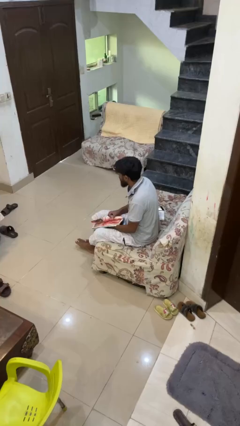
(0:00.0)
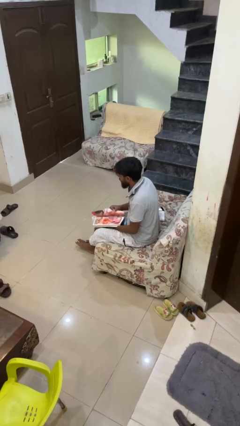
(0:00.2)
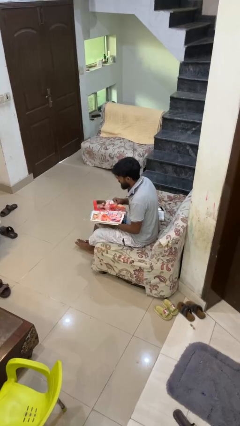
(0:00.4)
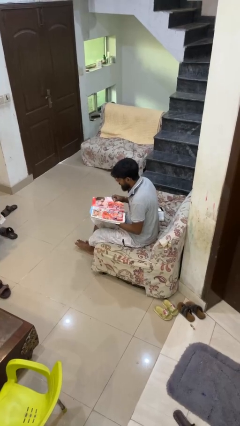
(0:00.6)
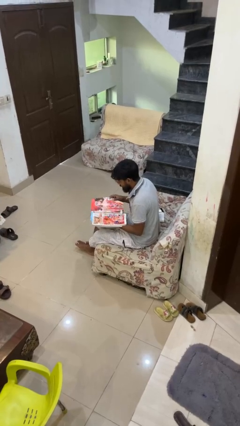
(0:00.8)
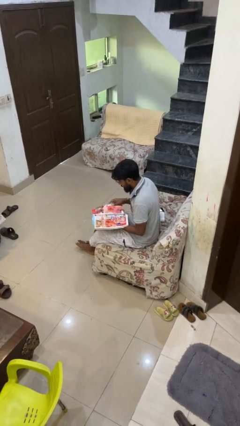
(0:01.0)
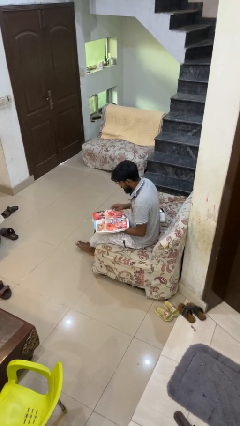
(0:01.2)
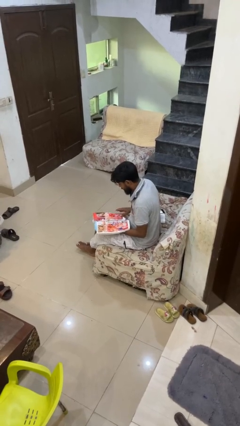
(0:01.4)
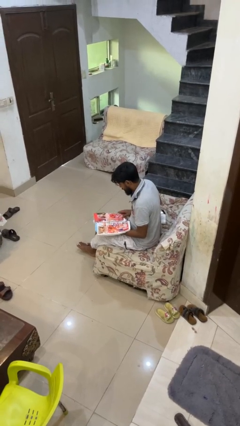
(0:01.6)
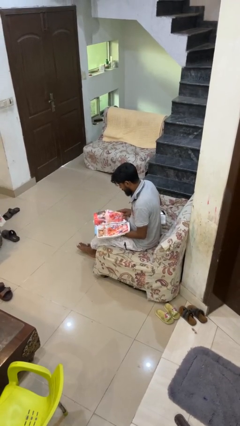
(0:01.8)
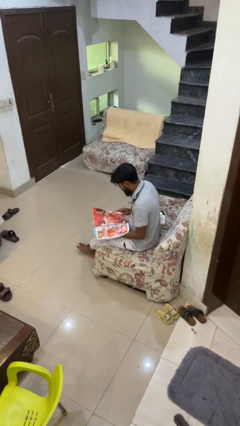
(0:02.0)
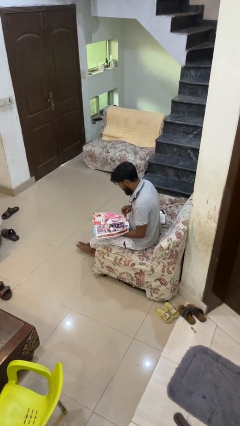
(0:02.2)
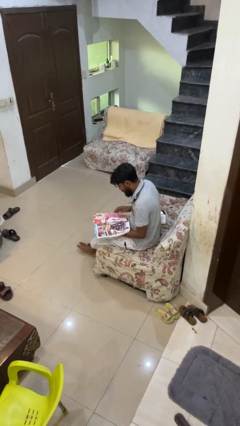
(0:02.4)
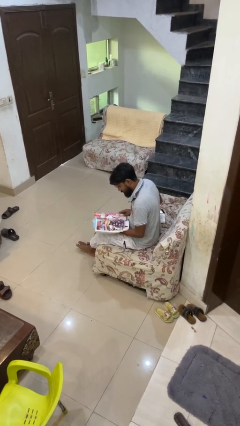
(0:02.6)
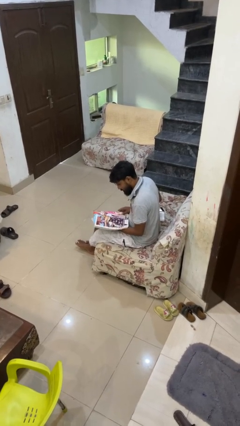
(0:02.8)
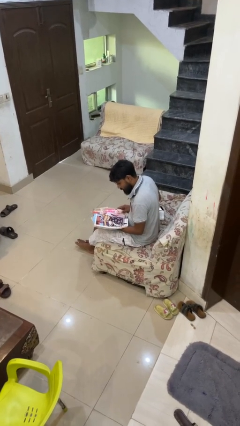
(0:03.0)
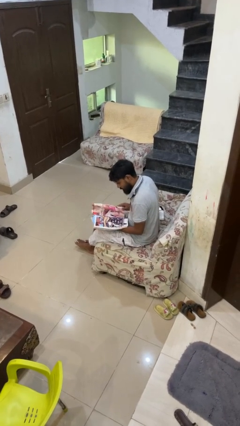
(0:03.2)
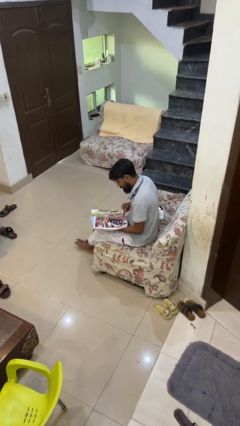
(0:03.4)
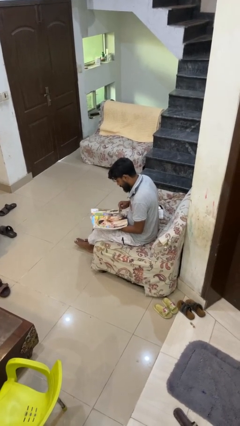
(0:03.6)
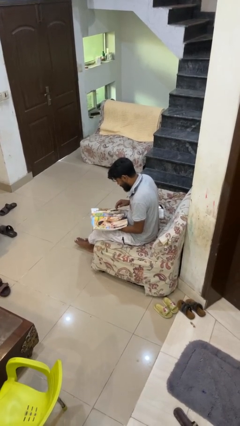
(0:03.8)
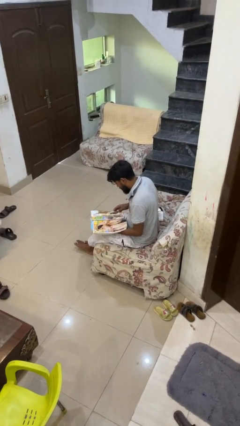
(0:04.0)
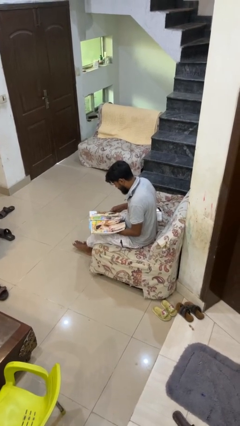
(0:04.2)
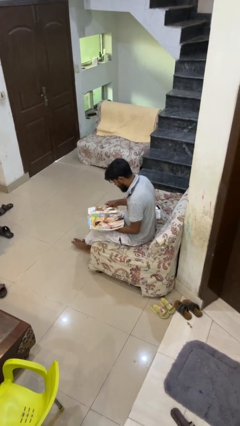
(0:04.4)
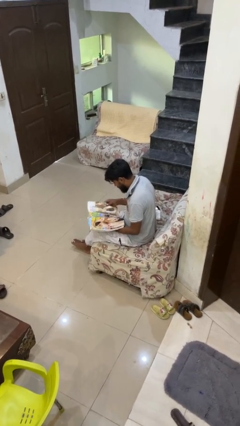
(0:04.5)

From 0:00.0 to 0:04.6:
person reads magazine

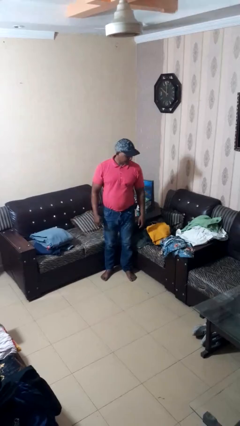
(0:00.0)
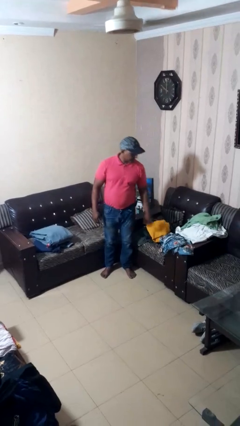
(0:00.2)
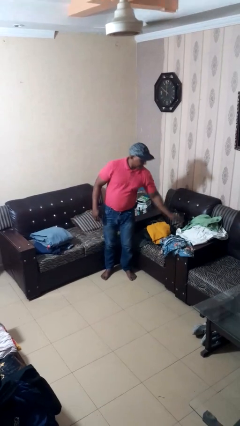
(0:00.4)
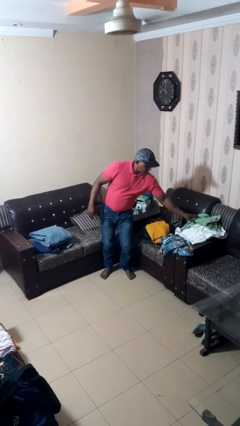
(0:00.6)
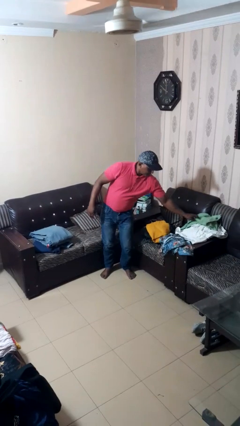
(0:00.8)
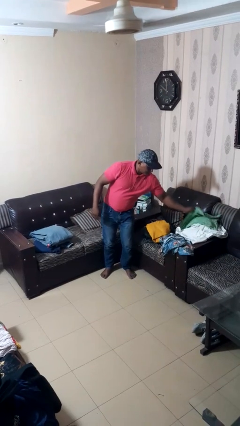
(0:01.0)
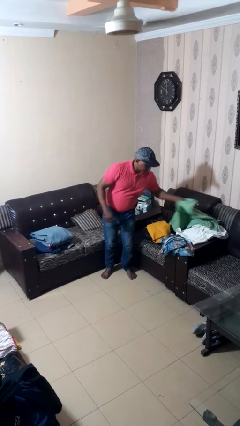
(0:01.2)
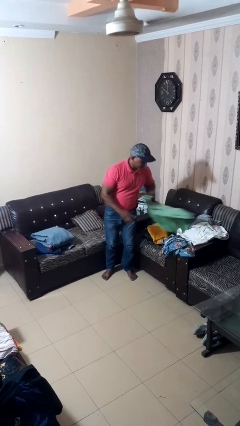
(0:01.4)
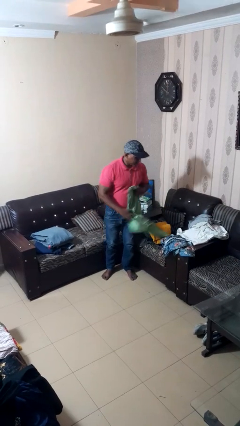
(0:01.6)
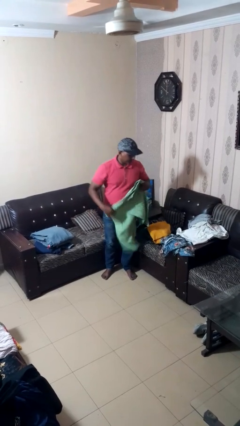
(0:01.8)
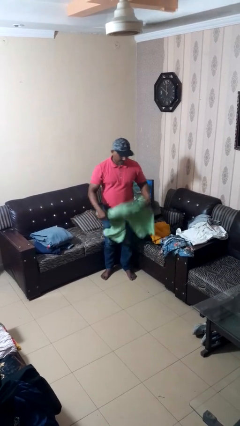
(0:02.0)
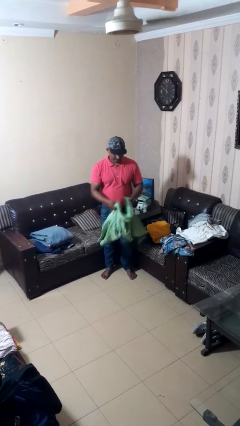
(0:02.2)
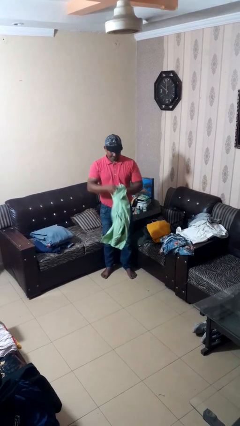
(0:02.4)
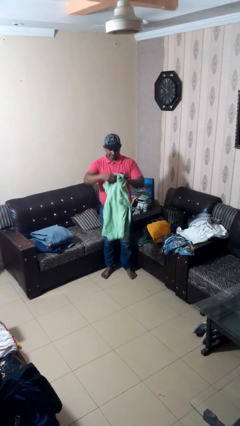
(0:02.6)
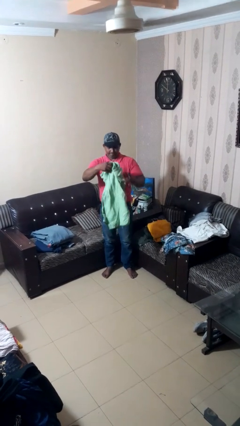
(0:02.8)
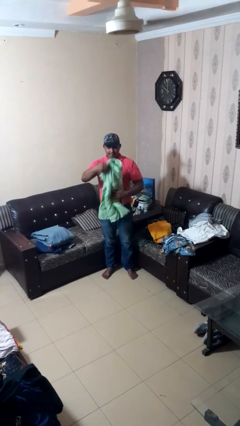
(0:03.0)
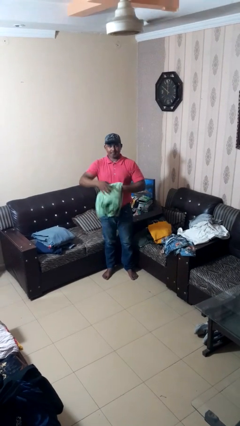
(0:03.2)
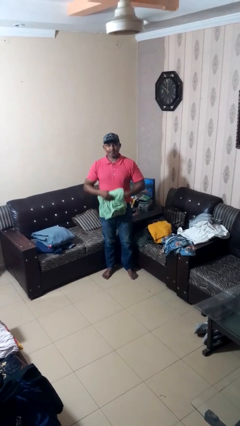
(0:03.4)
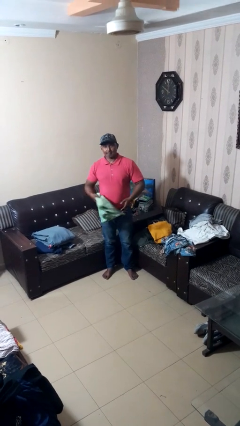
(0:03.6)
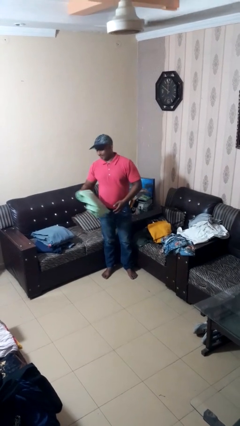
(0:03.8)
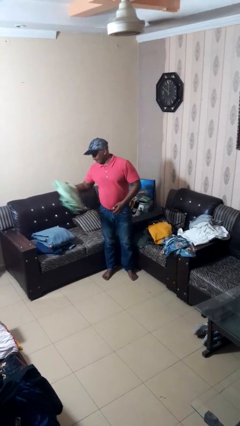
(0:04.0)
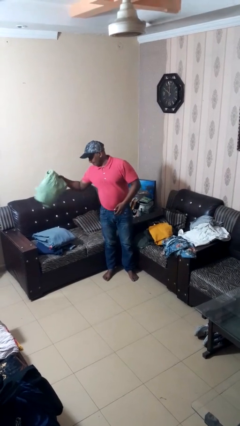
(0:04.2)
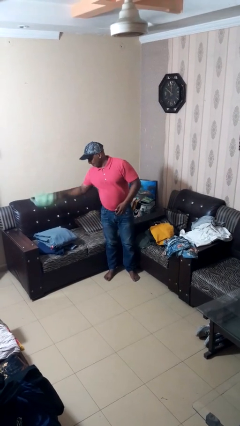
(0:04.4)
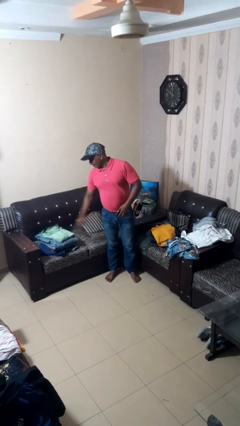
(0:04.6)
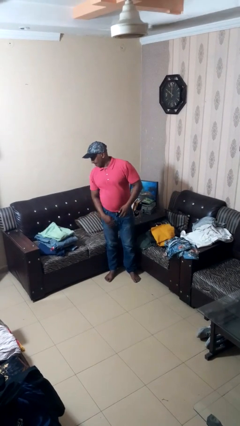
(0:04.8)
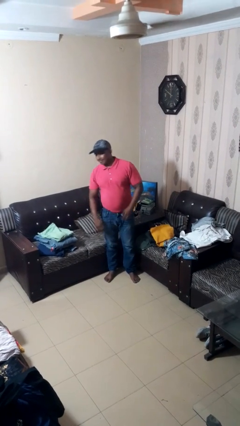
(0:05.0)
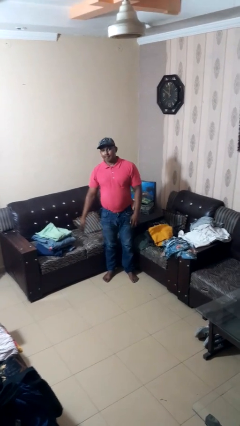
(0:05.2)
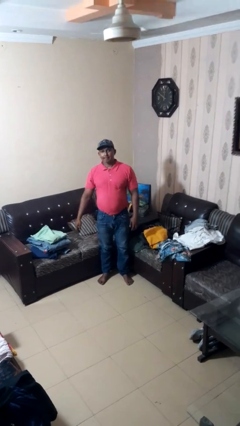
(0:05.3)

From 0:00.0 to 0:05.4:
person folds pants

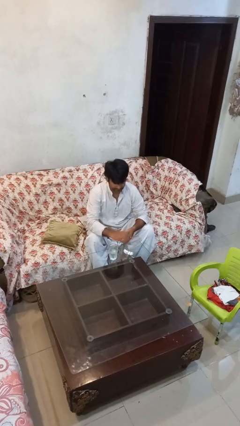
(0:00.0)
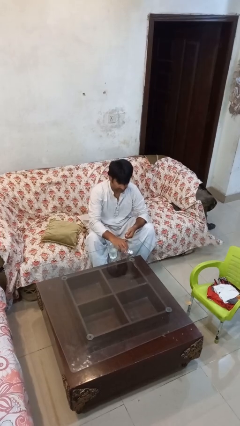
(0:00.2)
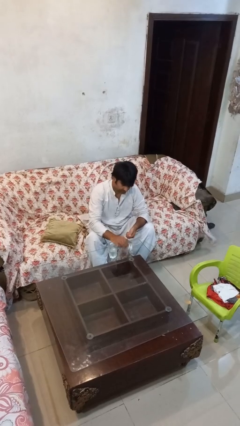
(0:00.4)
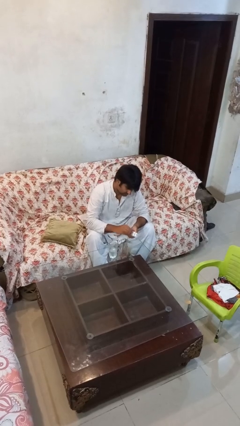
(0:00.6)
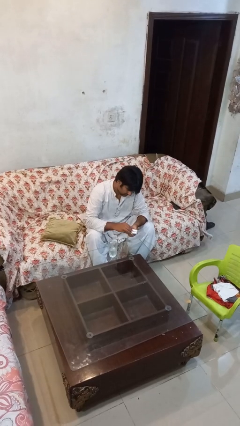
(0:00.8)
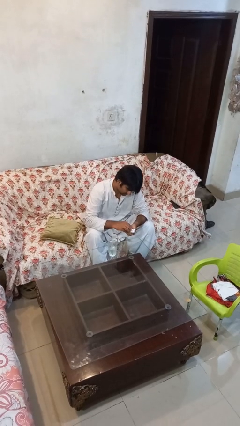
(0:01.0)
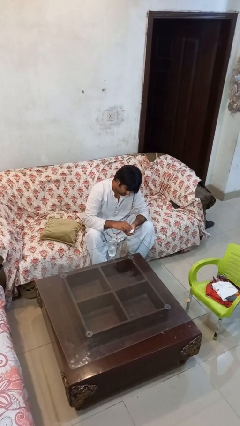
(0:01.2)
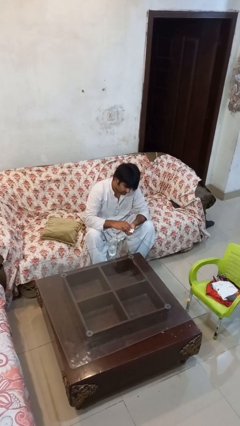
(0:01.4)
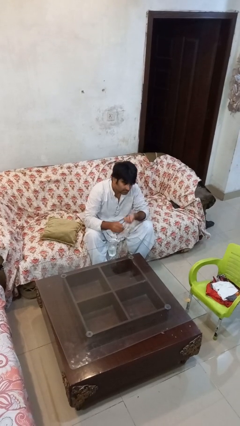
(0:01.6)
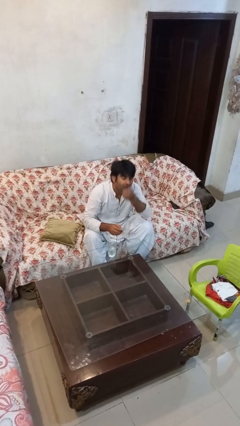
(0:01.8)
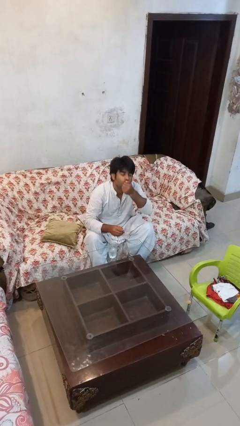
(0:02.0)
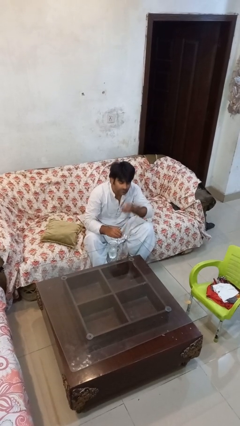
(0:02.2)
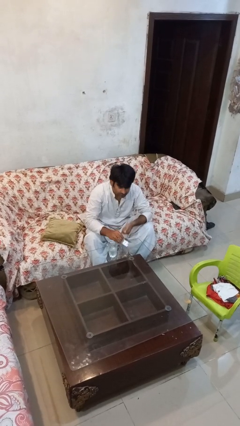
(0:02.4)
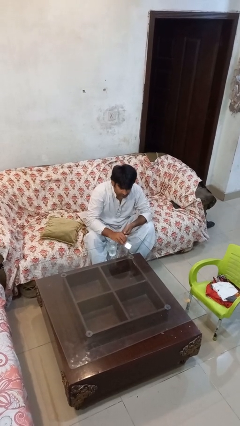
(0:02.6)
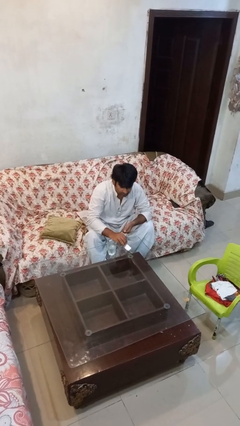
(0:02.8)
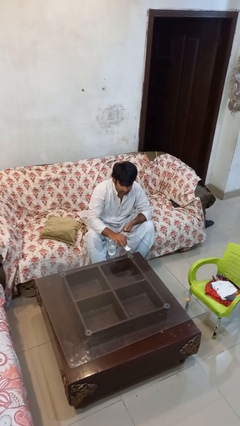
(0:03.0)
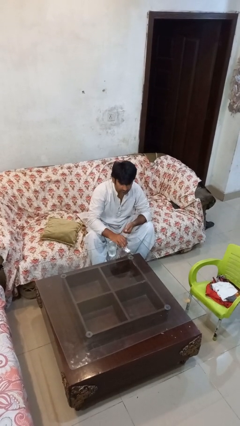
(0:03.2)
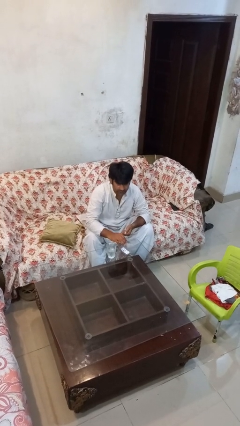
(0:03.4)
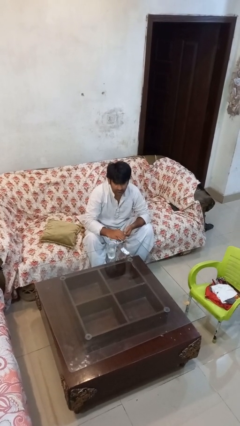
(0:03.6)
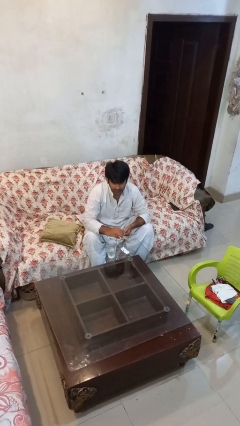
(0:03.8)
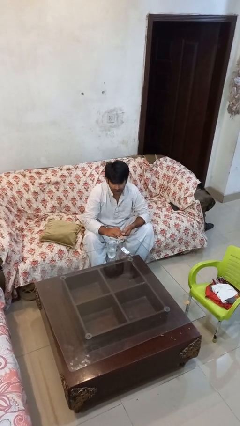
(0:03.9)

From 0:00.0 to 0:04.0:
person takes medicine pills

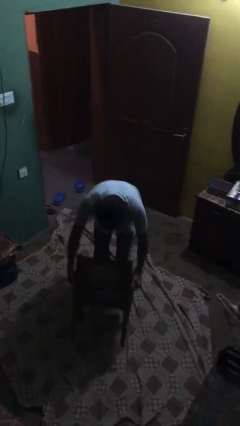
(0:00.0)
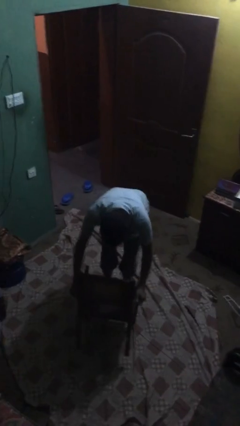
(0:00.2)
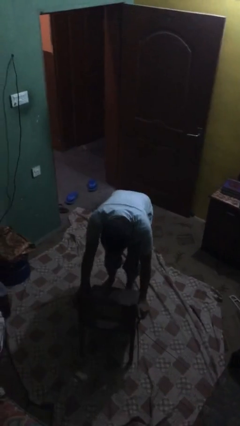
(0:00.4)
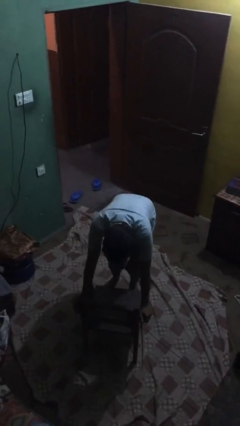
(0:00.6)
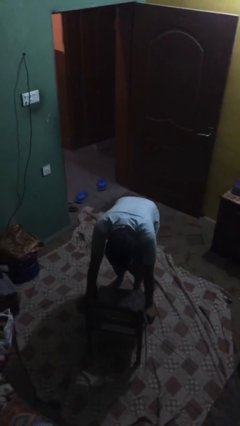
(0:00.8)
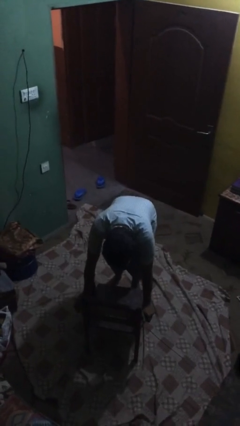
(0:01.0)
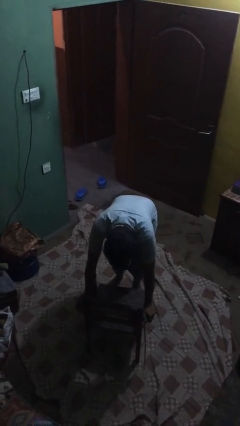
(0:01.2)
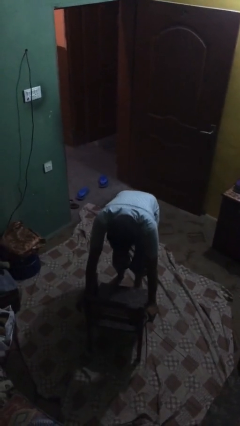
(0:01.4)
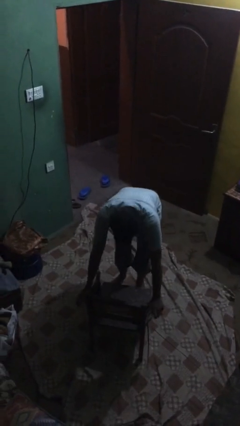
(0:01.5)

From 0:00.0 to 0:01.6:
person puts down object on floor

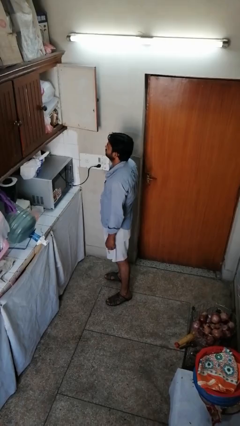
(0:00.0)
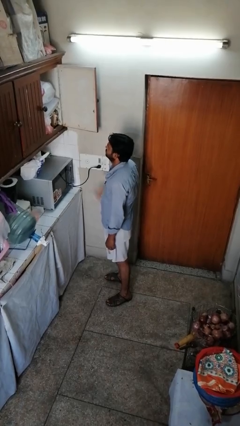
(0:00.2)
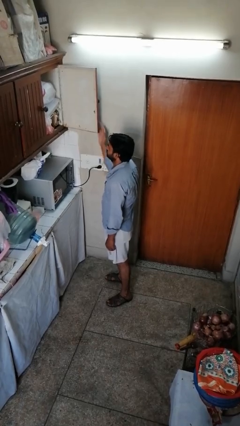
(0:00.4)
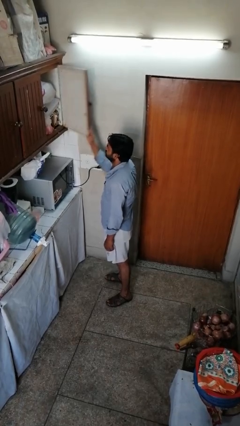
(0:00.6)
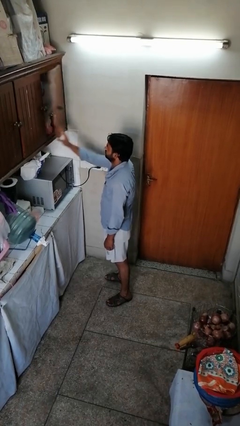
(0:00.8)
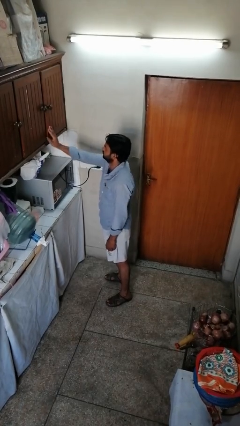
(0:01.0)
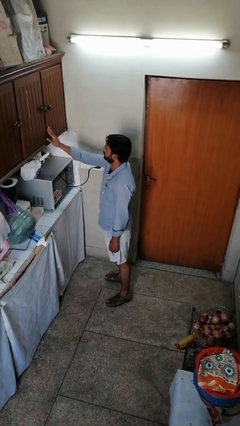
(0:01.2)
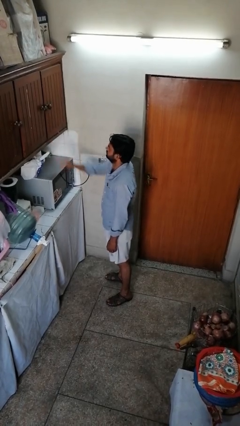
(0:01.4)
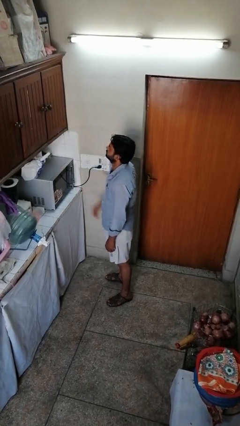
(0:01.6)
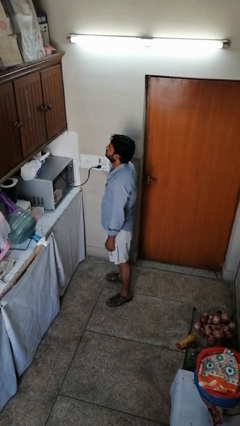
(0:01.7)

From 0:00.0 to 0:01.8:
person closes cabinet
